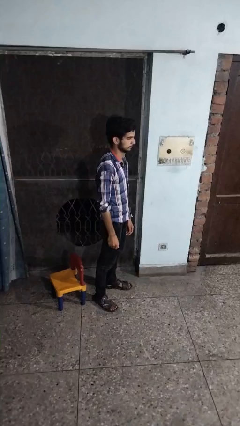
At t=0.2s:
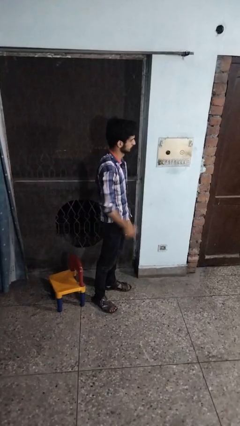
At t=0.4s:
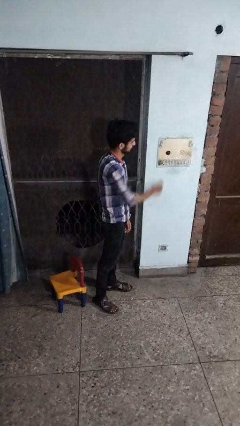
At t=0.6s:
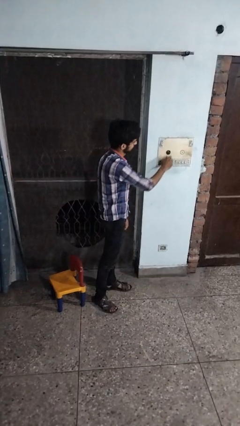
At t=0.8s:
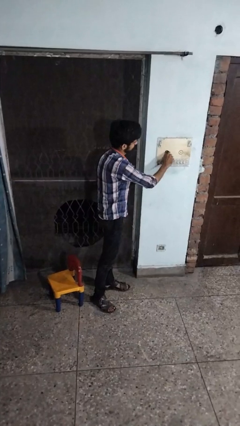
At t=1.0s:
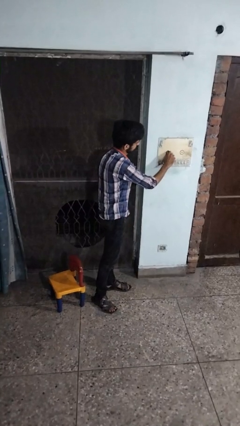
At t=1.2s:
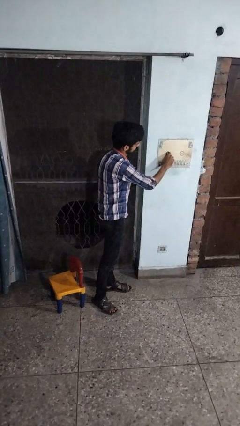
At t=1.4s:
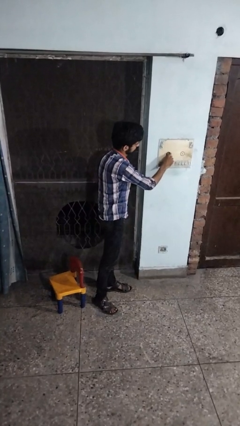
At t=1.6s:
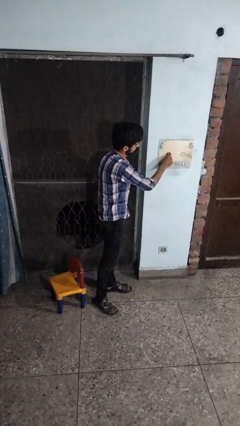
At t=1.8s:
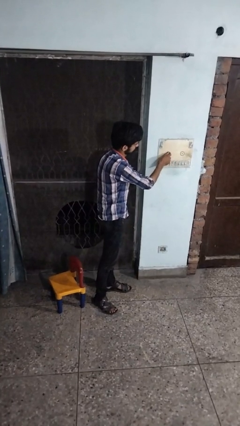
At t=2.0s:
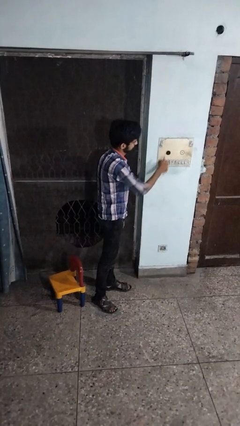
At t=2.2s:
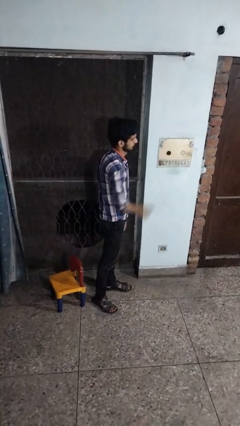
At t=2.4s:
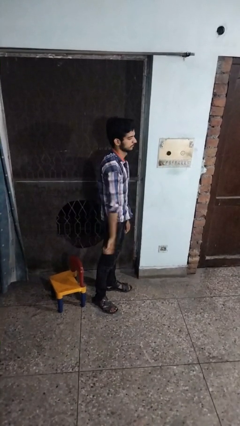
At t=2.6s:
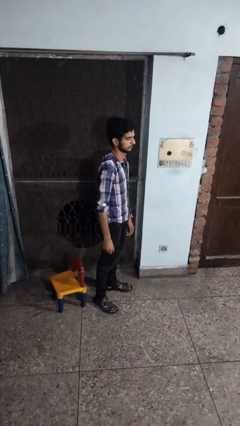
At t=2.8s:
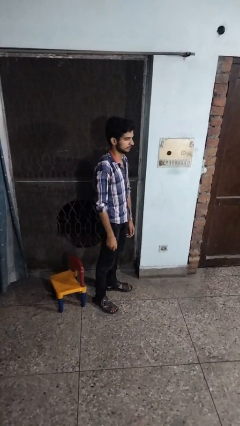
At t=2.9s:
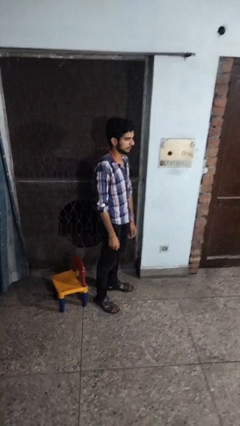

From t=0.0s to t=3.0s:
person adjusts thermostat

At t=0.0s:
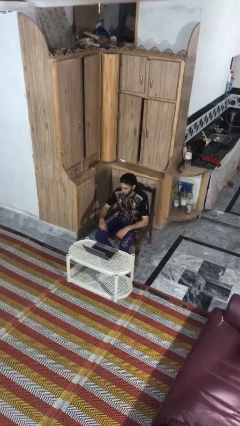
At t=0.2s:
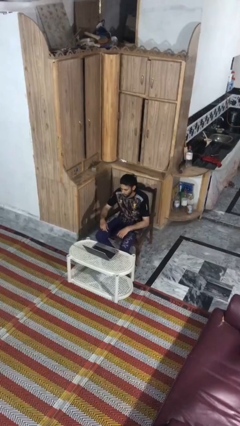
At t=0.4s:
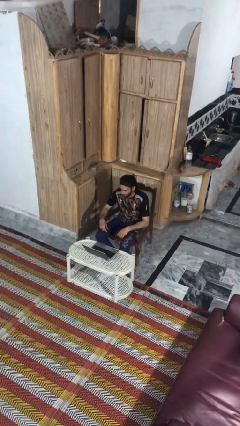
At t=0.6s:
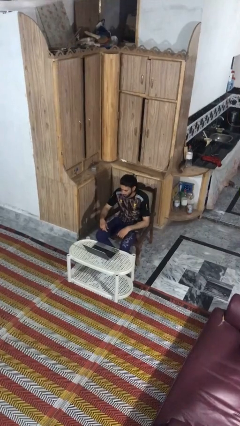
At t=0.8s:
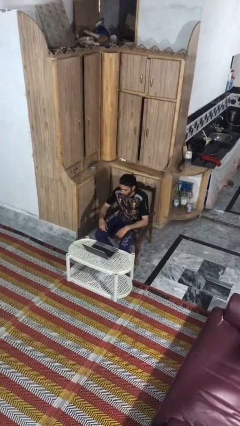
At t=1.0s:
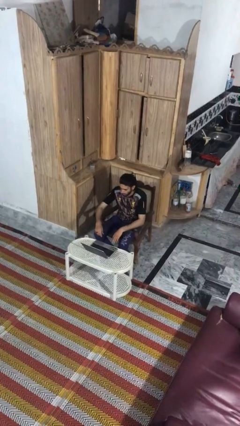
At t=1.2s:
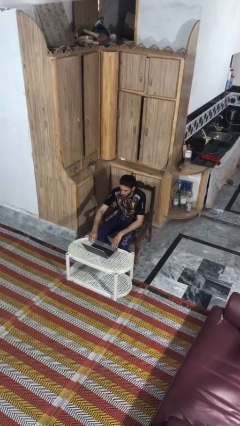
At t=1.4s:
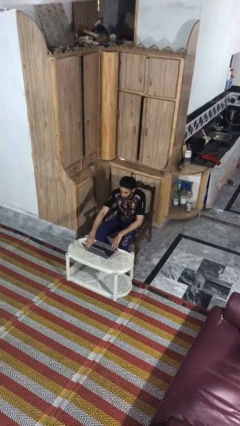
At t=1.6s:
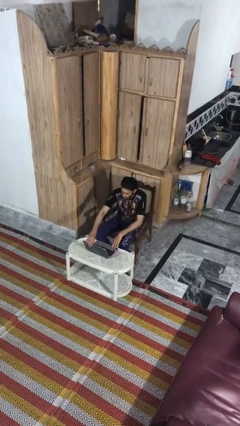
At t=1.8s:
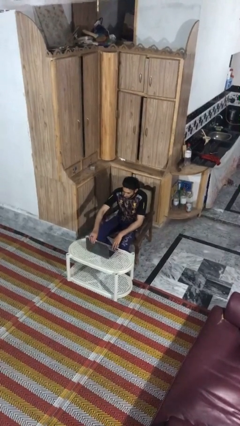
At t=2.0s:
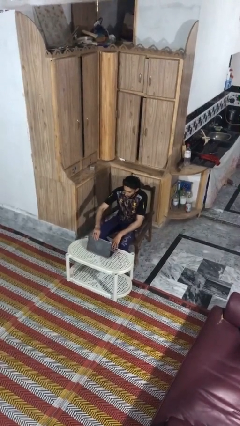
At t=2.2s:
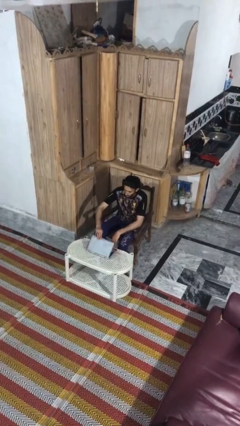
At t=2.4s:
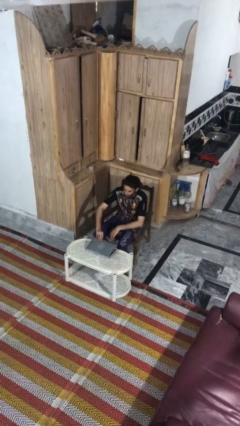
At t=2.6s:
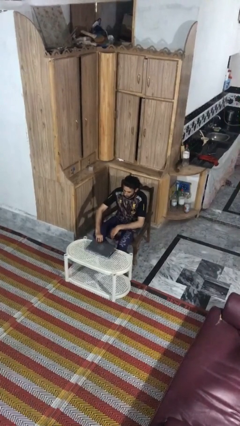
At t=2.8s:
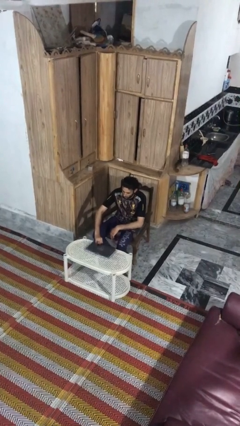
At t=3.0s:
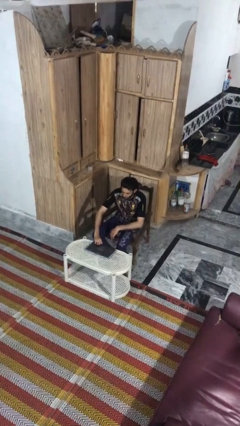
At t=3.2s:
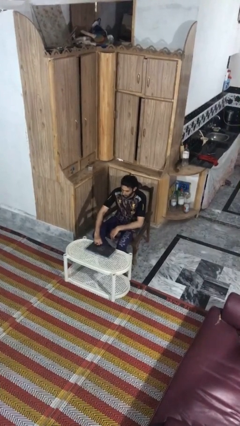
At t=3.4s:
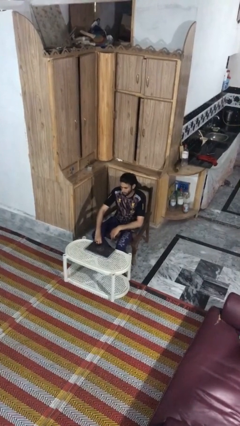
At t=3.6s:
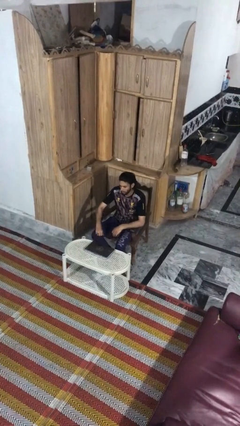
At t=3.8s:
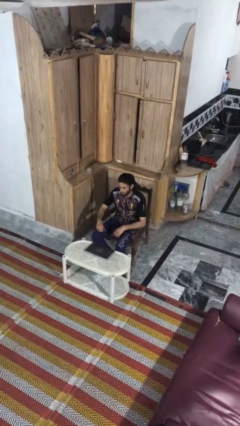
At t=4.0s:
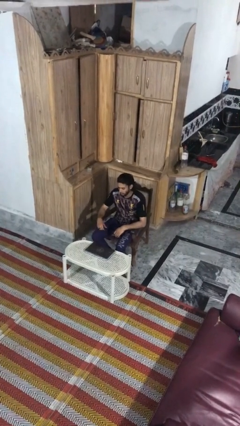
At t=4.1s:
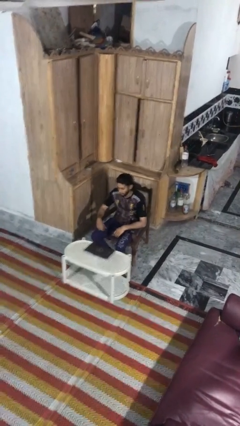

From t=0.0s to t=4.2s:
person closes laptop

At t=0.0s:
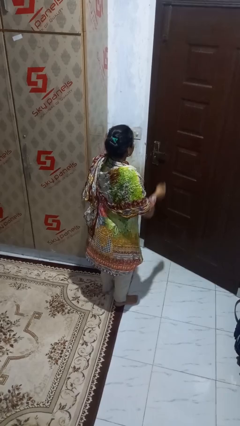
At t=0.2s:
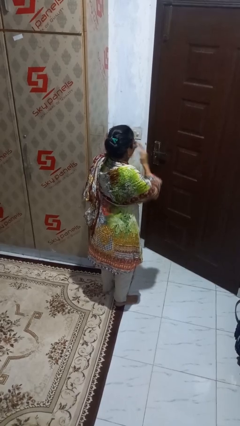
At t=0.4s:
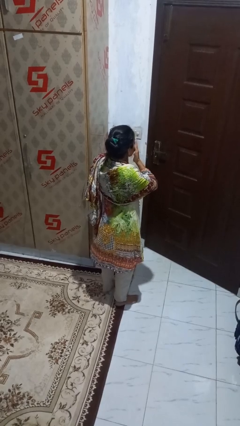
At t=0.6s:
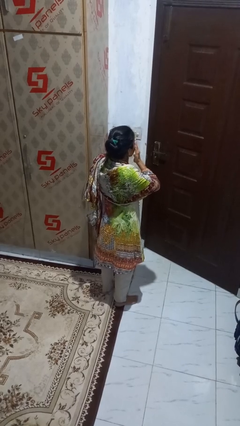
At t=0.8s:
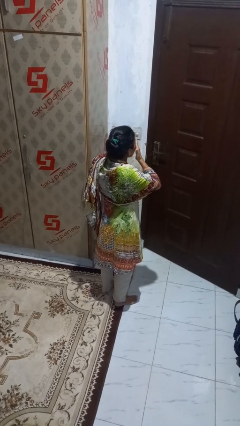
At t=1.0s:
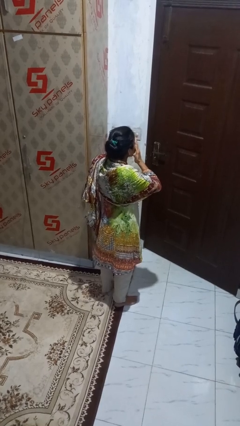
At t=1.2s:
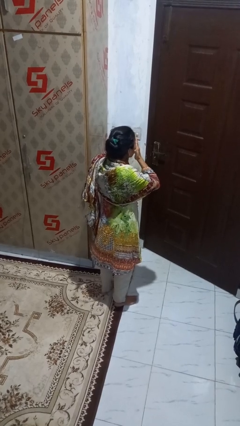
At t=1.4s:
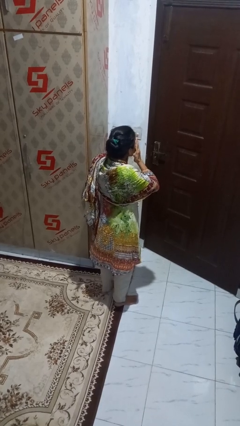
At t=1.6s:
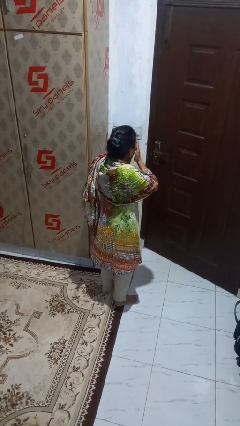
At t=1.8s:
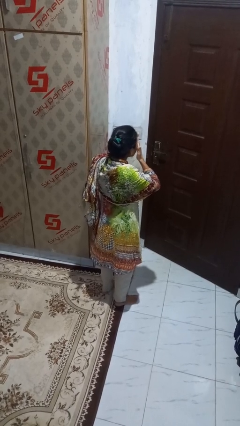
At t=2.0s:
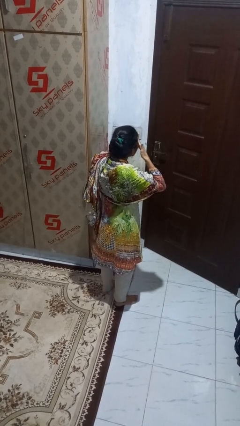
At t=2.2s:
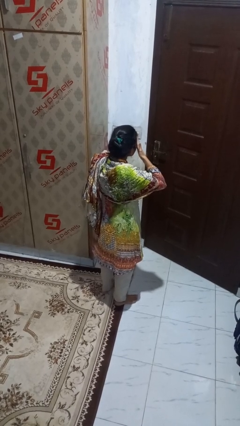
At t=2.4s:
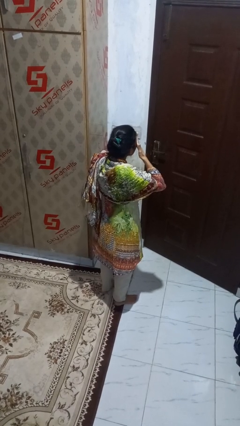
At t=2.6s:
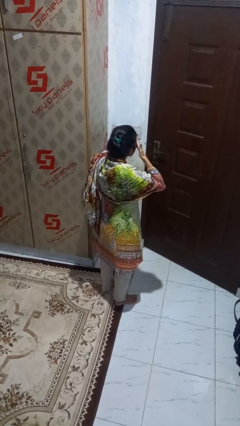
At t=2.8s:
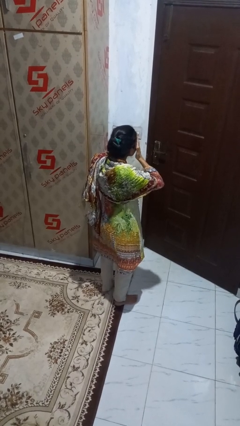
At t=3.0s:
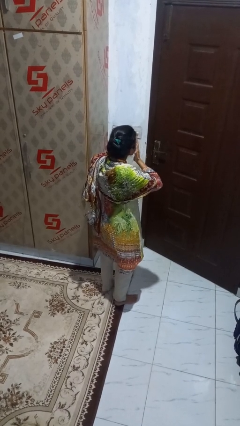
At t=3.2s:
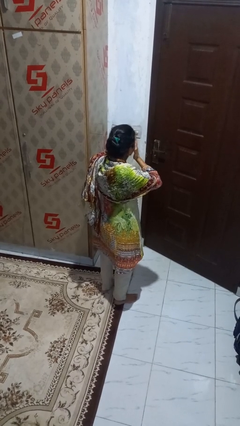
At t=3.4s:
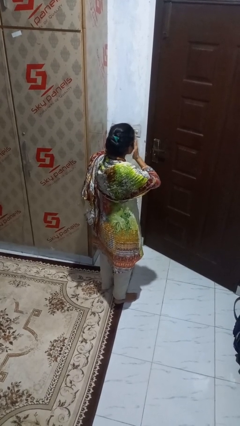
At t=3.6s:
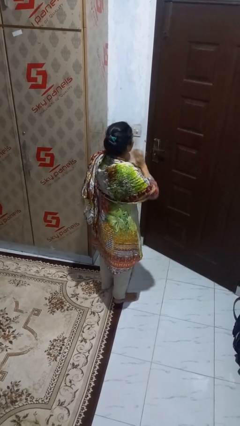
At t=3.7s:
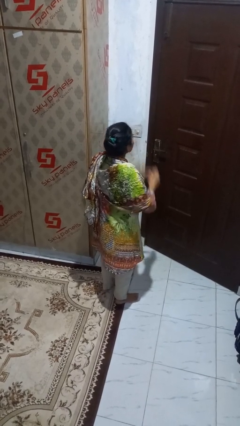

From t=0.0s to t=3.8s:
person rubs eyes

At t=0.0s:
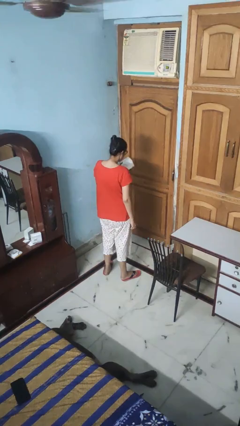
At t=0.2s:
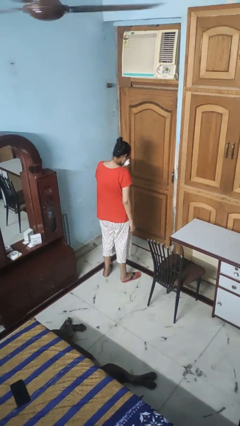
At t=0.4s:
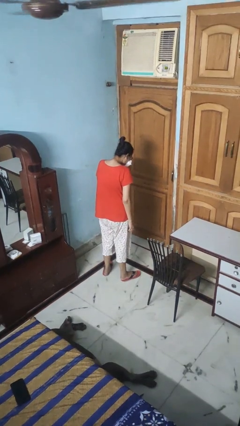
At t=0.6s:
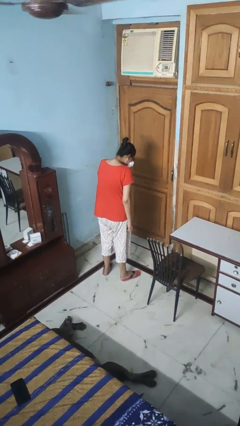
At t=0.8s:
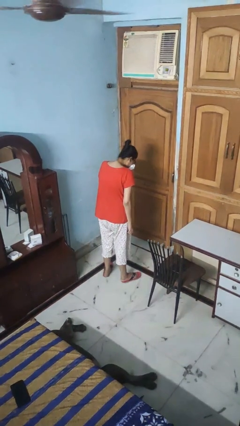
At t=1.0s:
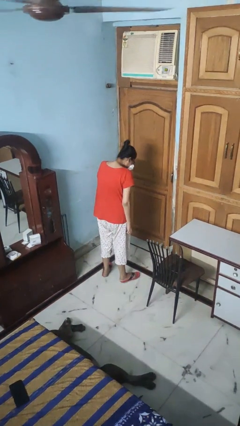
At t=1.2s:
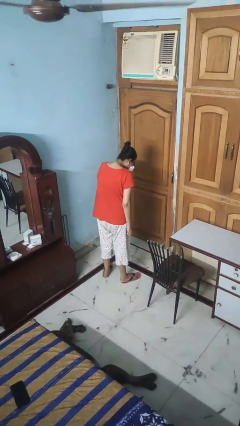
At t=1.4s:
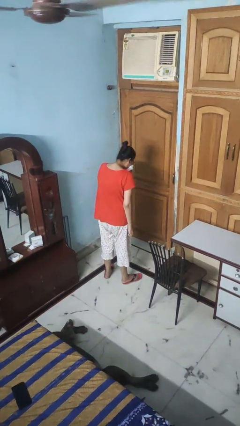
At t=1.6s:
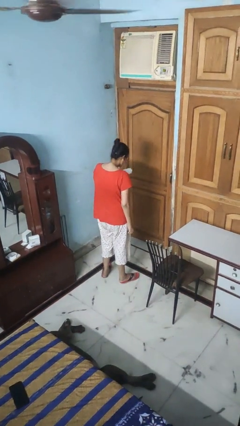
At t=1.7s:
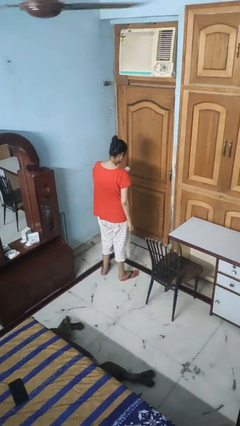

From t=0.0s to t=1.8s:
person blows nose

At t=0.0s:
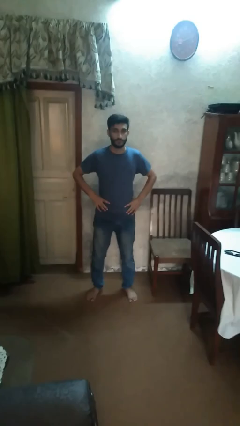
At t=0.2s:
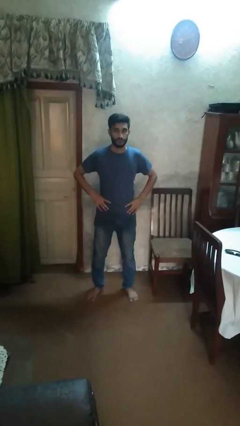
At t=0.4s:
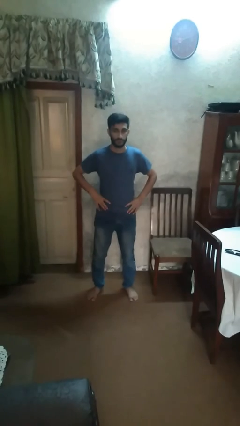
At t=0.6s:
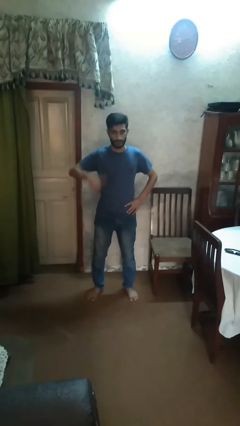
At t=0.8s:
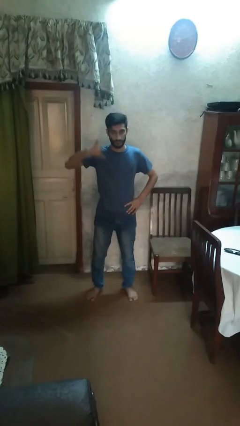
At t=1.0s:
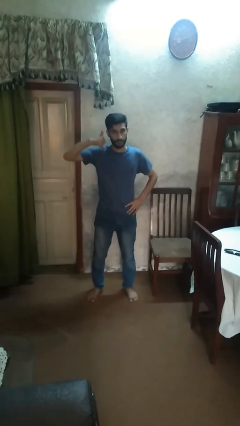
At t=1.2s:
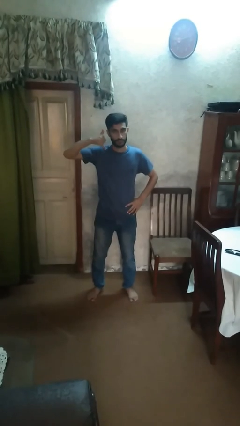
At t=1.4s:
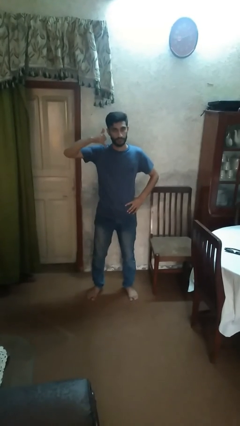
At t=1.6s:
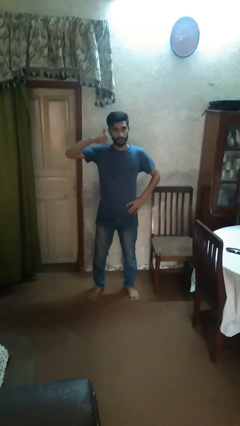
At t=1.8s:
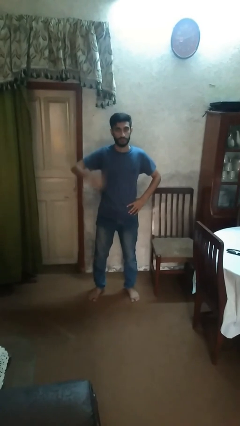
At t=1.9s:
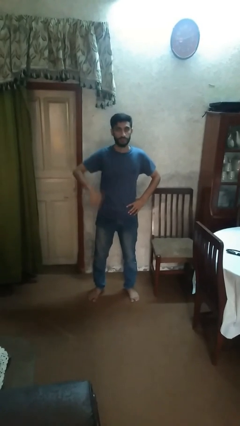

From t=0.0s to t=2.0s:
person gestures call me

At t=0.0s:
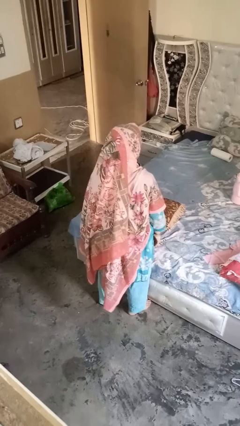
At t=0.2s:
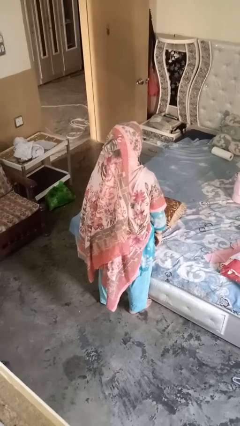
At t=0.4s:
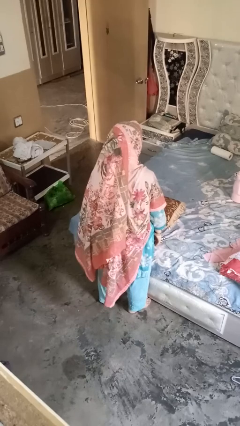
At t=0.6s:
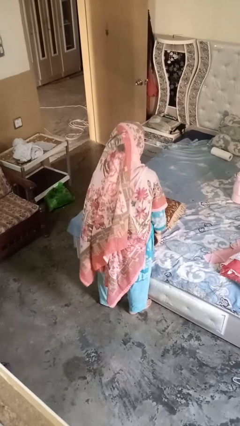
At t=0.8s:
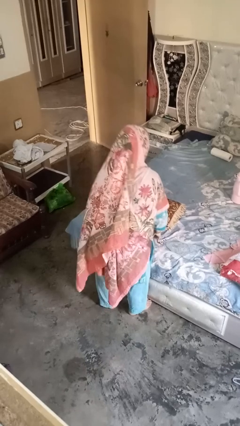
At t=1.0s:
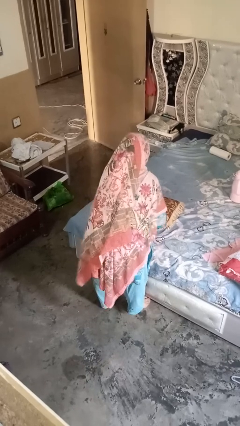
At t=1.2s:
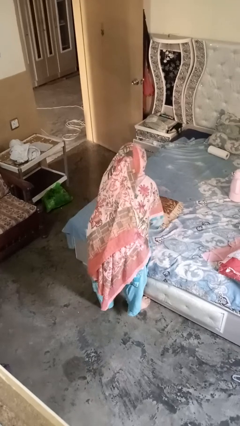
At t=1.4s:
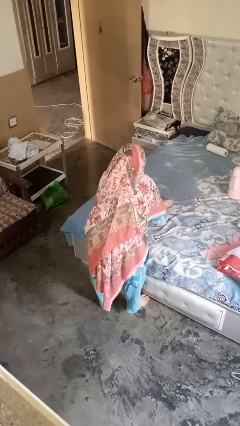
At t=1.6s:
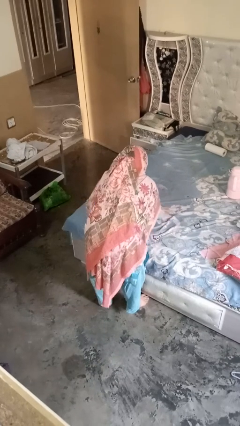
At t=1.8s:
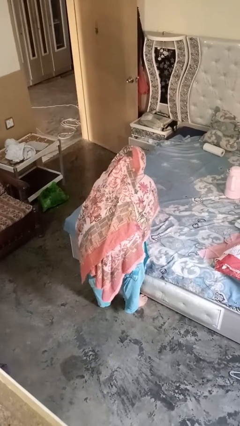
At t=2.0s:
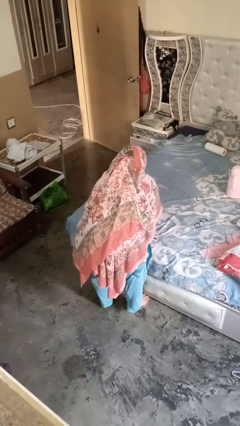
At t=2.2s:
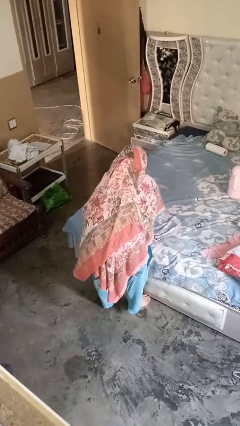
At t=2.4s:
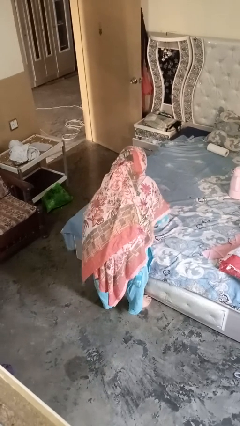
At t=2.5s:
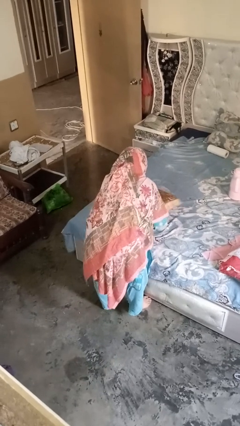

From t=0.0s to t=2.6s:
person searches under bed
